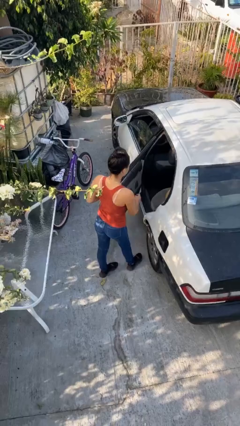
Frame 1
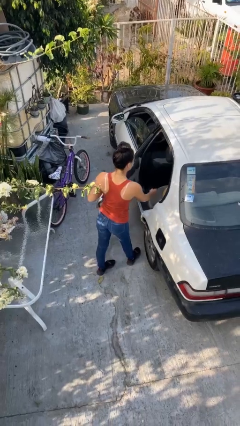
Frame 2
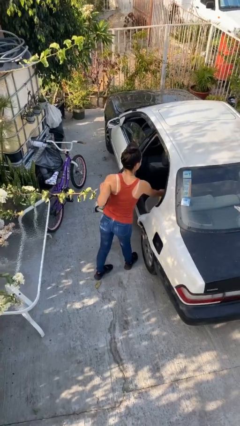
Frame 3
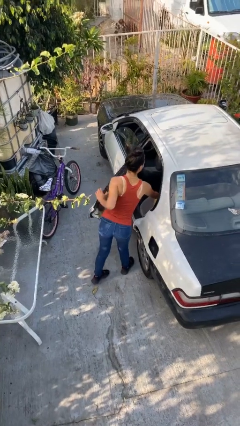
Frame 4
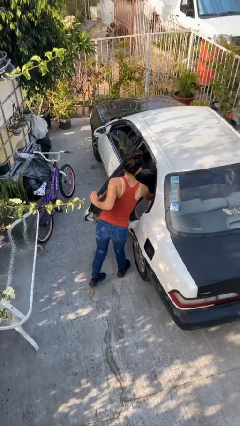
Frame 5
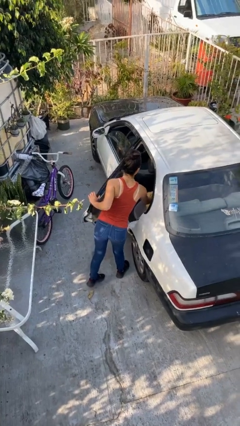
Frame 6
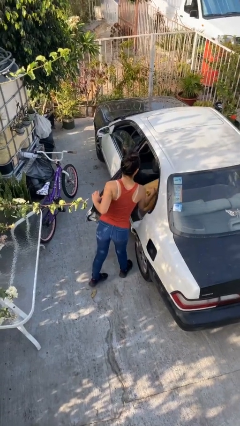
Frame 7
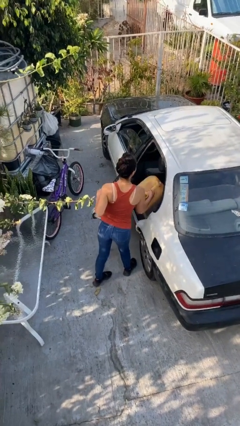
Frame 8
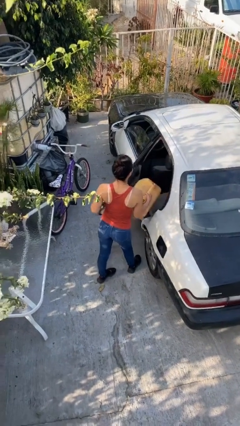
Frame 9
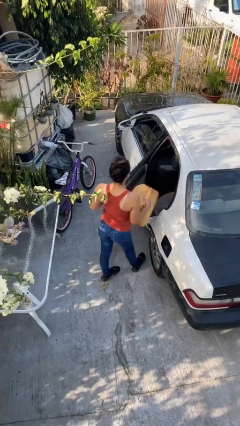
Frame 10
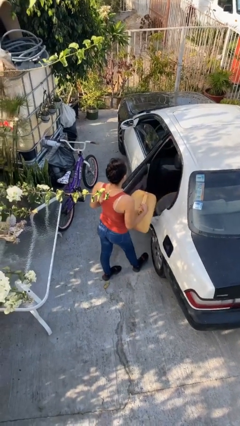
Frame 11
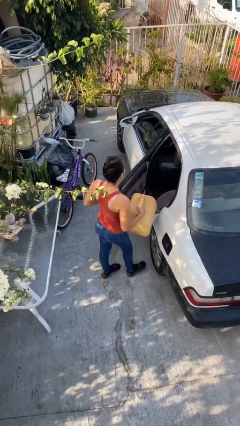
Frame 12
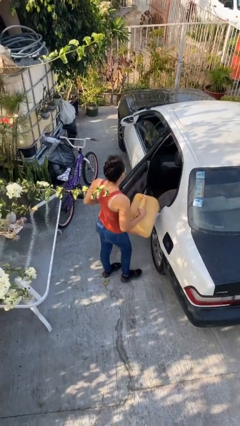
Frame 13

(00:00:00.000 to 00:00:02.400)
person unloads car

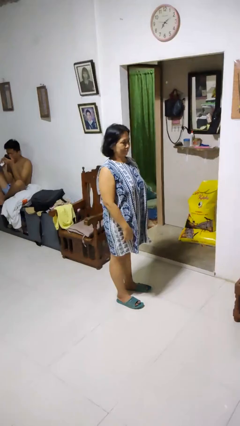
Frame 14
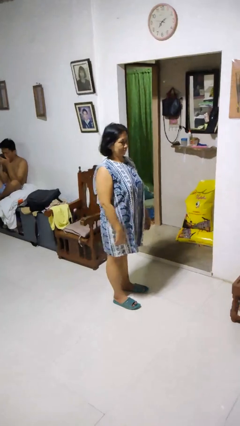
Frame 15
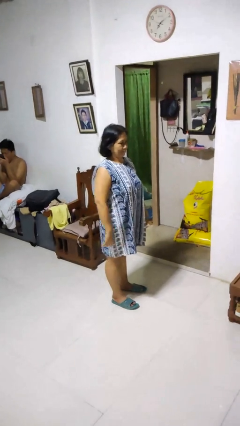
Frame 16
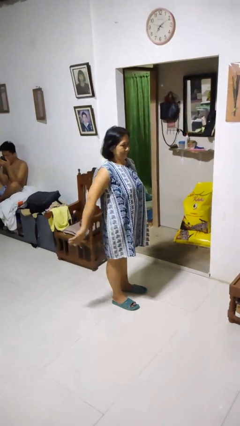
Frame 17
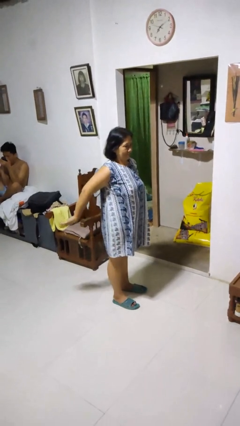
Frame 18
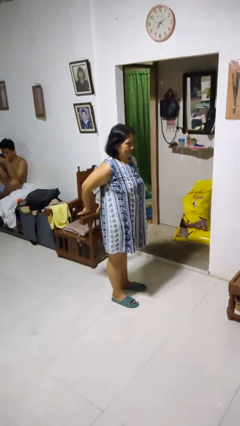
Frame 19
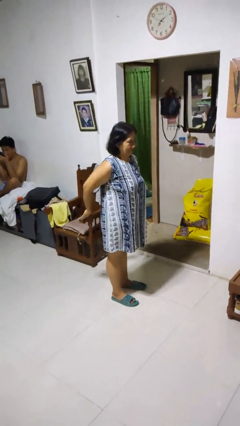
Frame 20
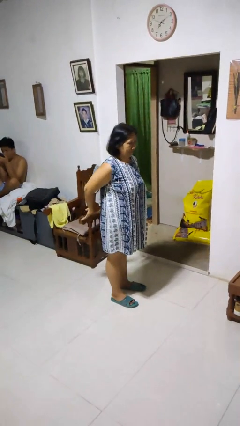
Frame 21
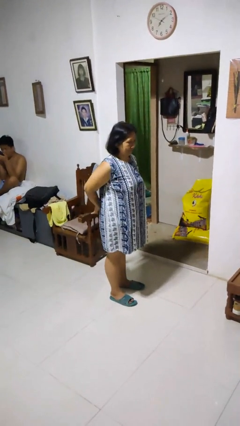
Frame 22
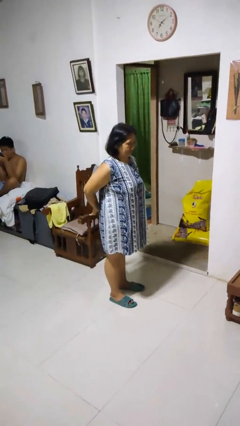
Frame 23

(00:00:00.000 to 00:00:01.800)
person stretches back

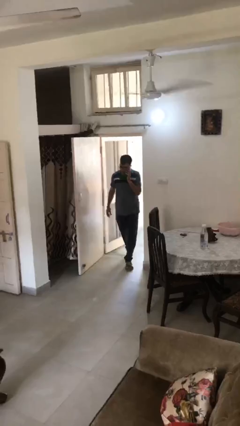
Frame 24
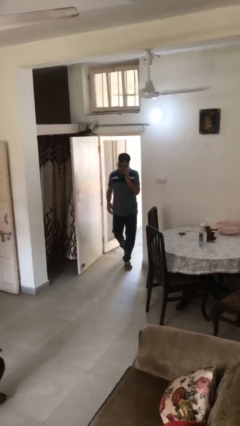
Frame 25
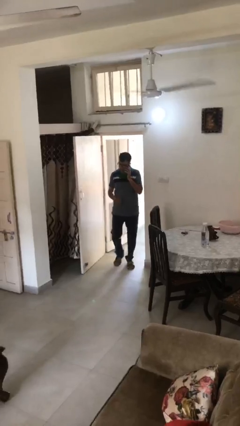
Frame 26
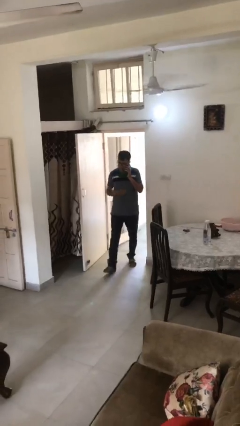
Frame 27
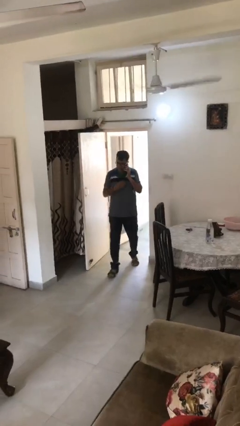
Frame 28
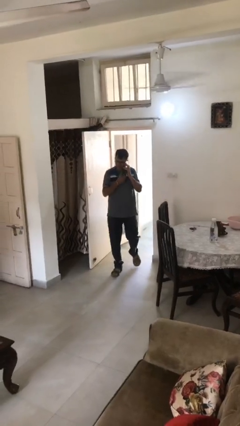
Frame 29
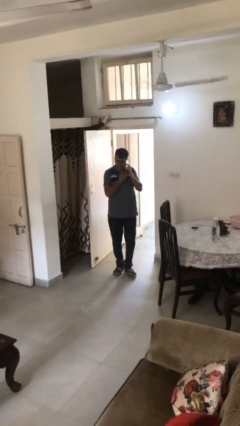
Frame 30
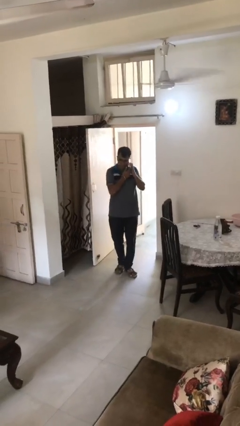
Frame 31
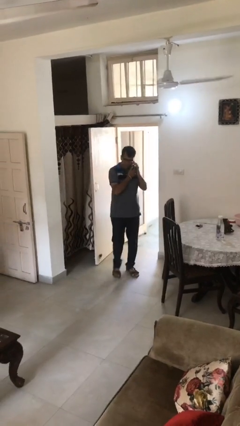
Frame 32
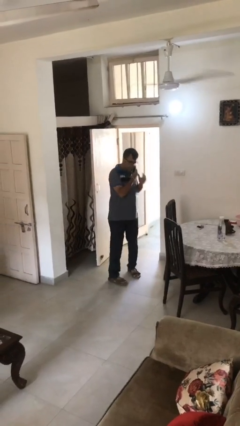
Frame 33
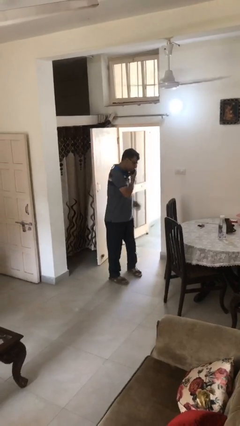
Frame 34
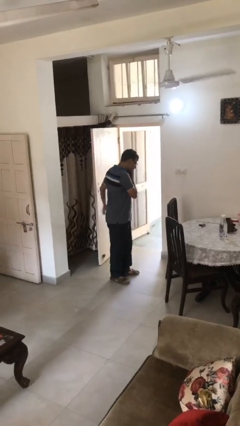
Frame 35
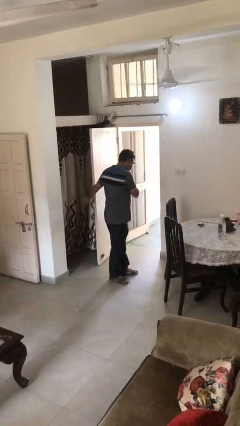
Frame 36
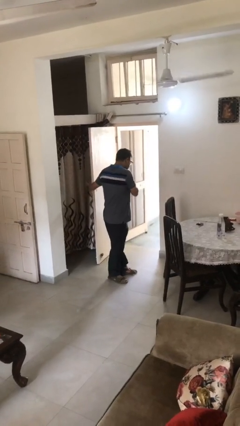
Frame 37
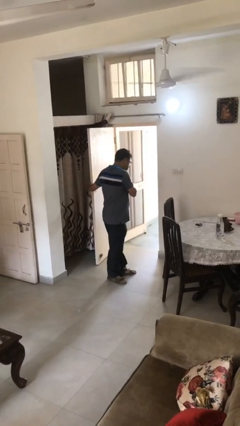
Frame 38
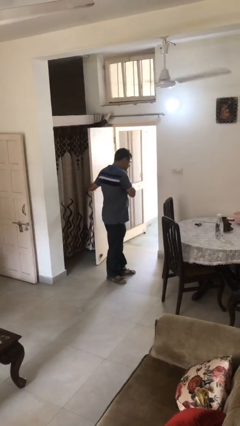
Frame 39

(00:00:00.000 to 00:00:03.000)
person enters scene through structure

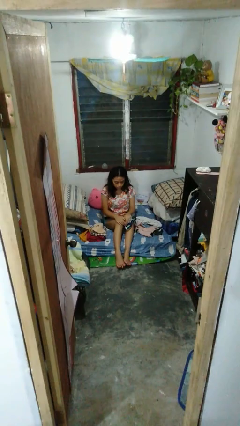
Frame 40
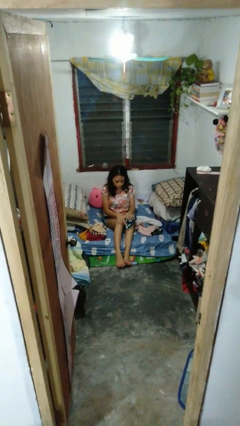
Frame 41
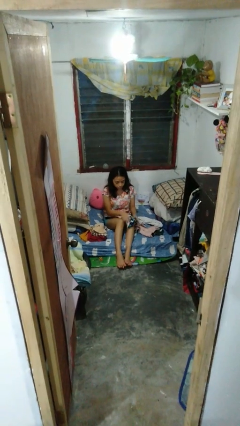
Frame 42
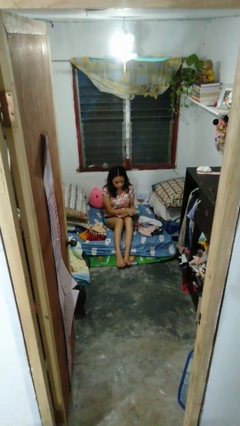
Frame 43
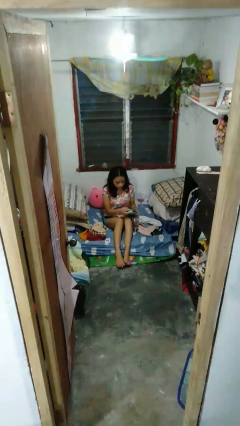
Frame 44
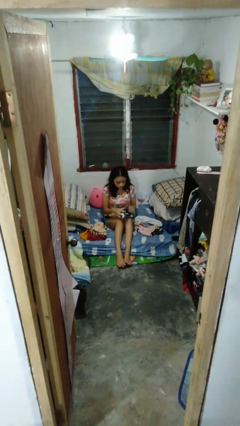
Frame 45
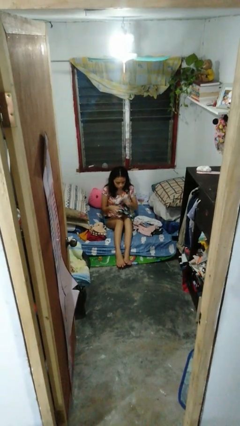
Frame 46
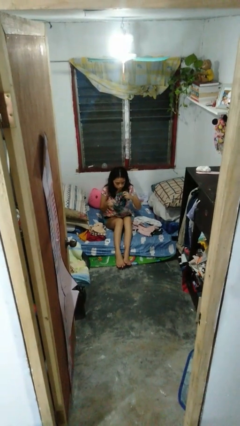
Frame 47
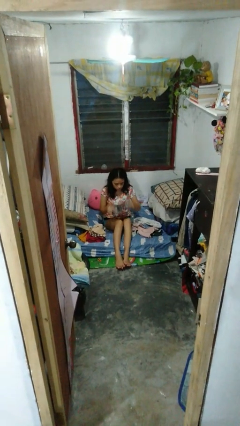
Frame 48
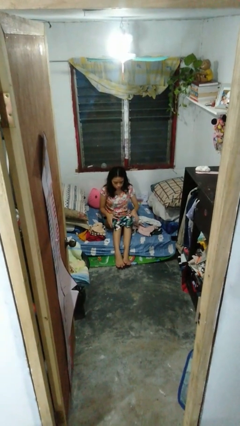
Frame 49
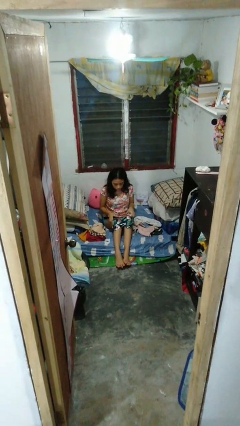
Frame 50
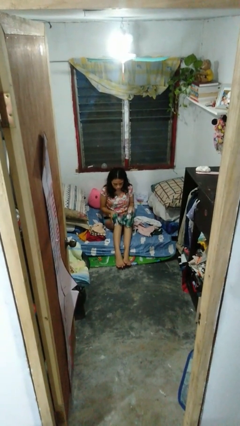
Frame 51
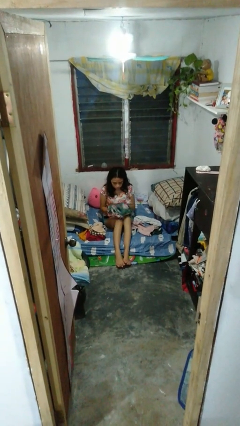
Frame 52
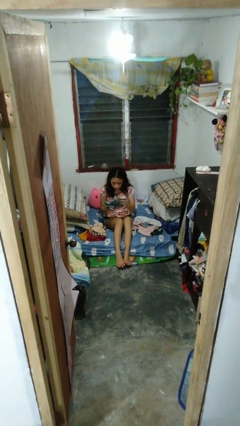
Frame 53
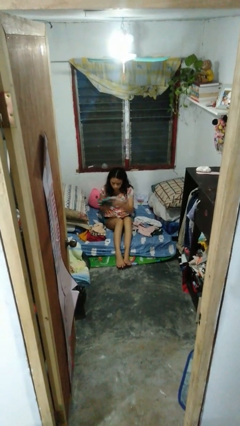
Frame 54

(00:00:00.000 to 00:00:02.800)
person folds shirt

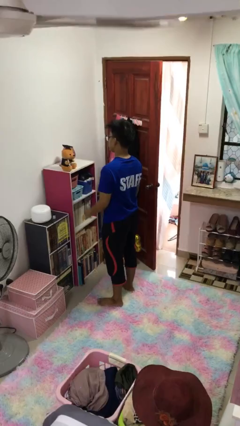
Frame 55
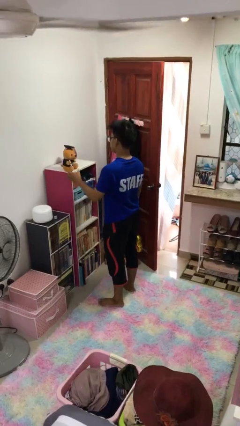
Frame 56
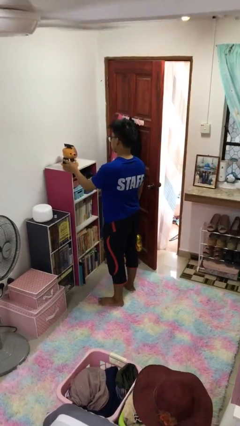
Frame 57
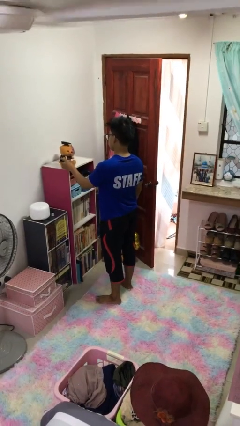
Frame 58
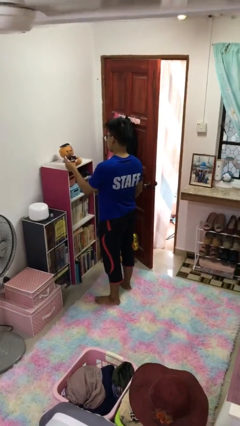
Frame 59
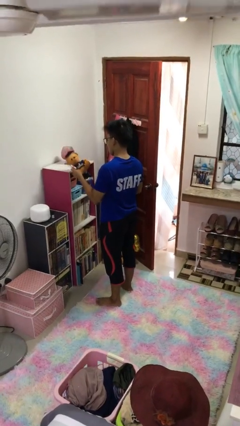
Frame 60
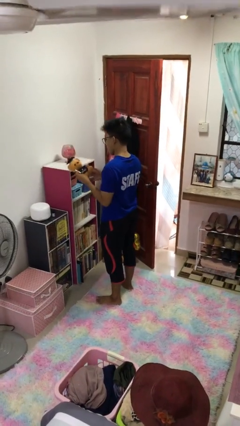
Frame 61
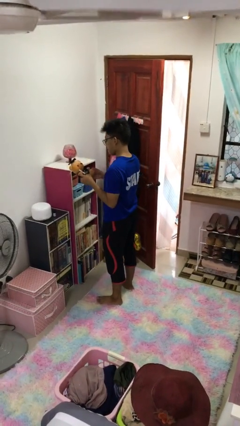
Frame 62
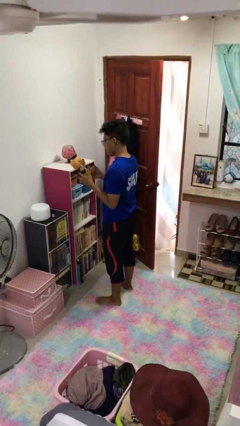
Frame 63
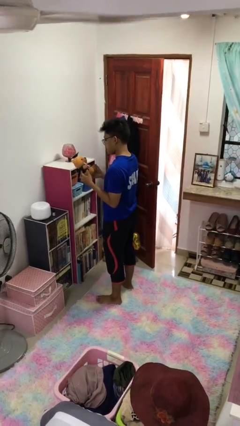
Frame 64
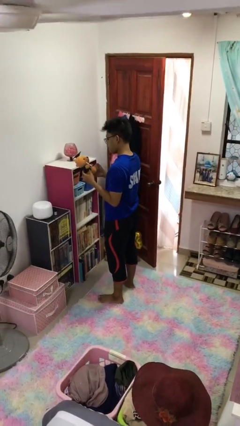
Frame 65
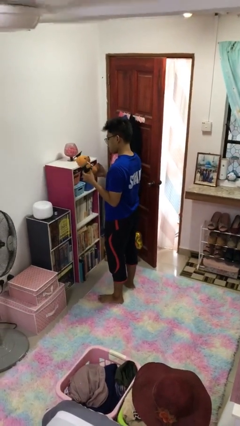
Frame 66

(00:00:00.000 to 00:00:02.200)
person picks up object from shelf

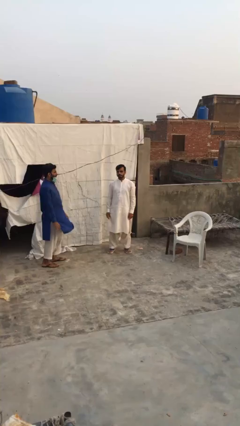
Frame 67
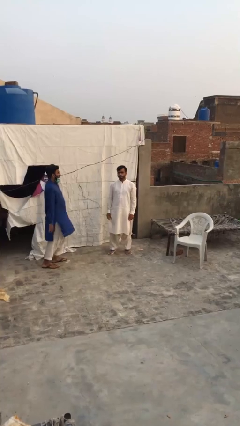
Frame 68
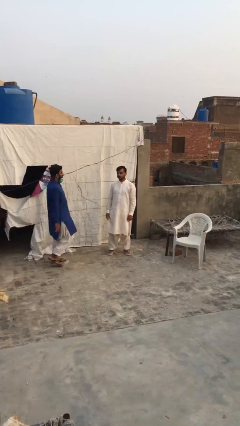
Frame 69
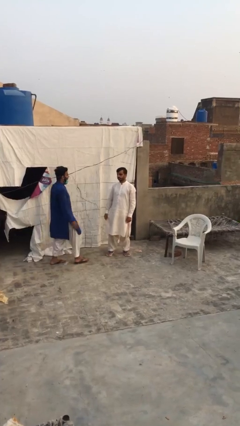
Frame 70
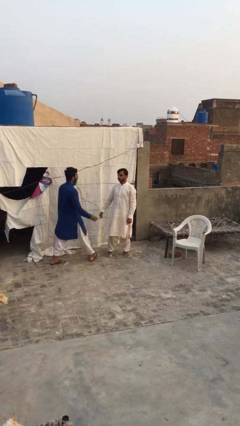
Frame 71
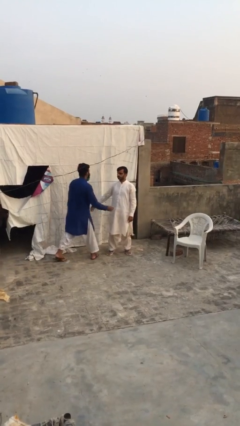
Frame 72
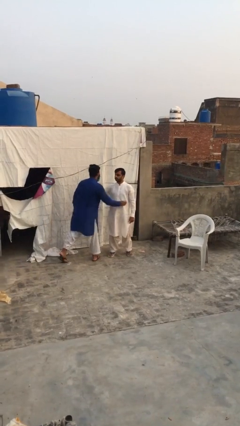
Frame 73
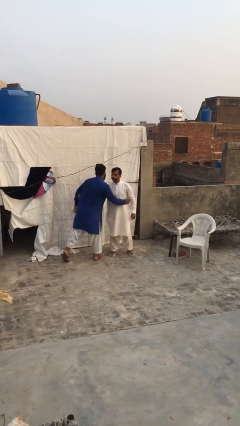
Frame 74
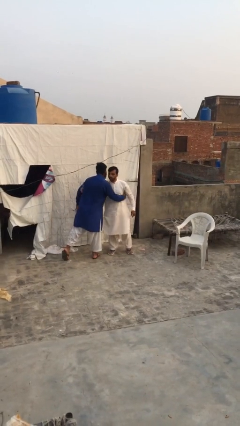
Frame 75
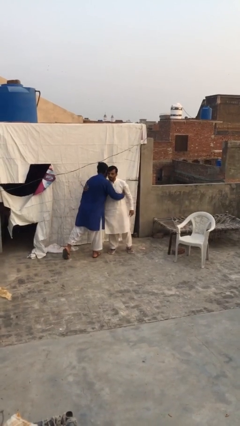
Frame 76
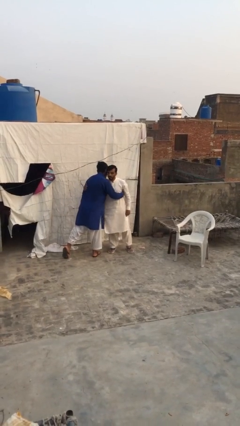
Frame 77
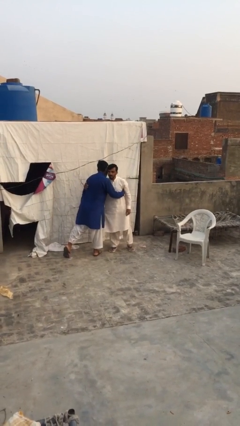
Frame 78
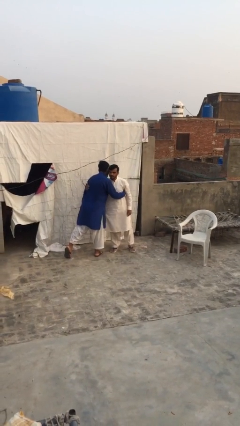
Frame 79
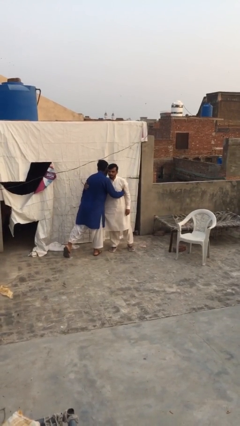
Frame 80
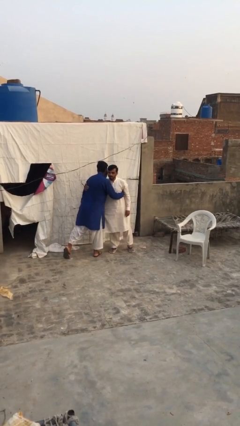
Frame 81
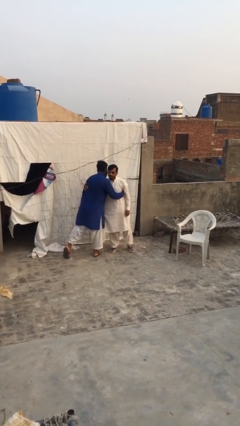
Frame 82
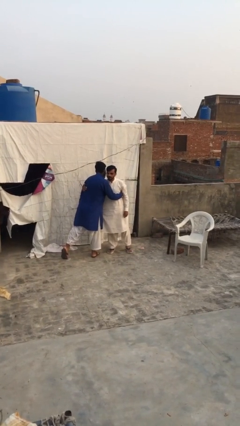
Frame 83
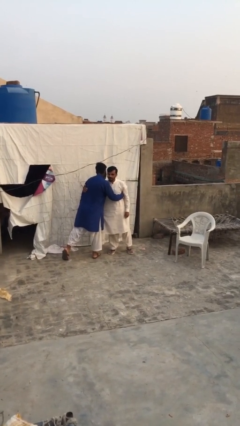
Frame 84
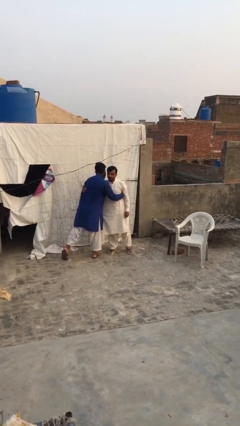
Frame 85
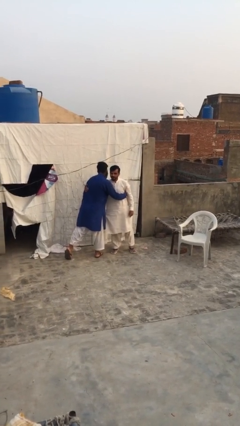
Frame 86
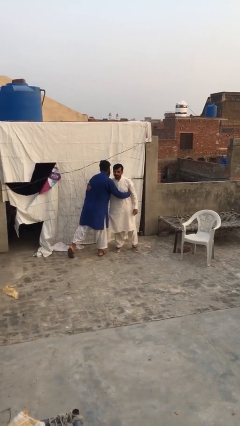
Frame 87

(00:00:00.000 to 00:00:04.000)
person embraces person

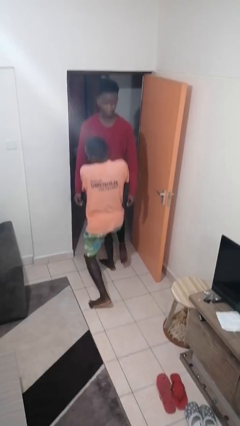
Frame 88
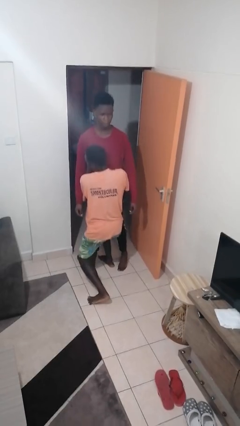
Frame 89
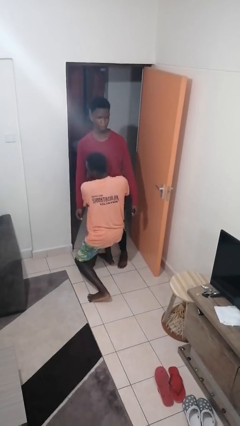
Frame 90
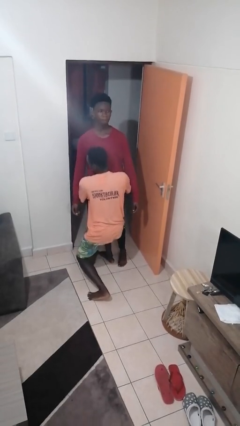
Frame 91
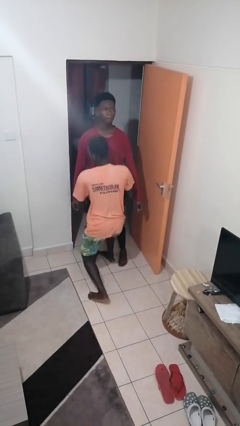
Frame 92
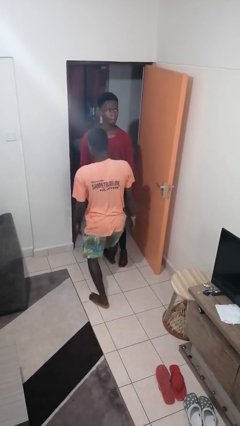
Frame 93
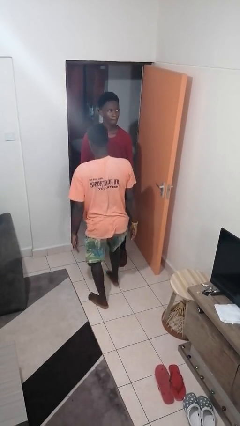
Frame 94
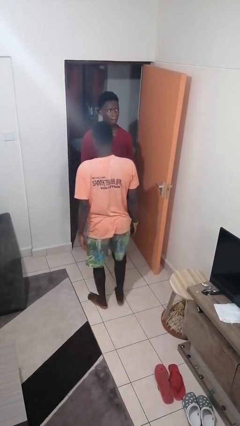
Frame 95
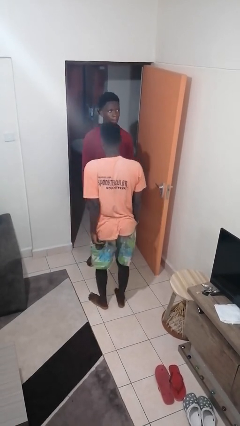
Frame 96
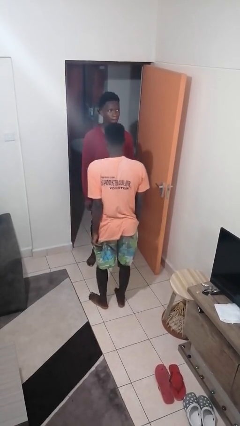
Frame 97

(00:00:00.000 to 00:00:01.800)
person puts down person
